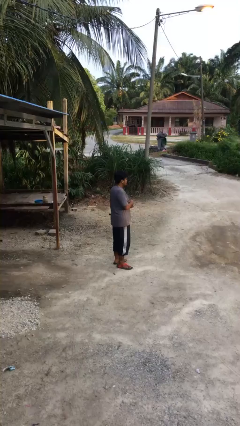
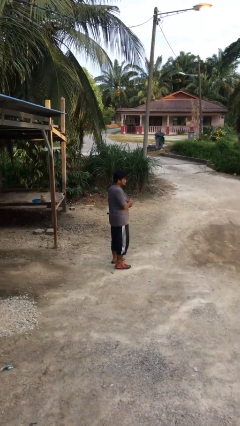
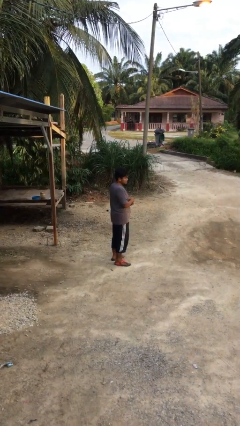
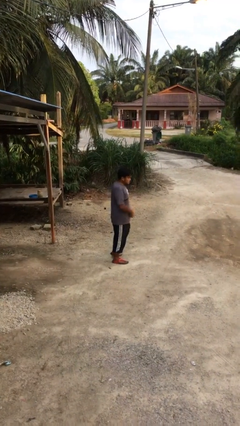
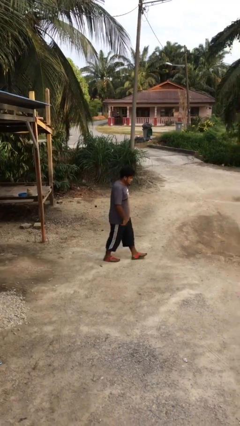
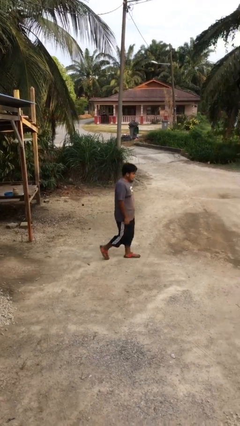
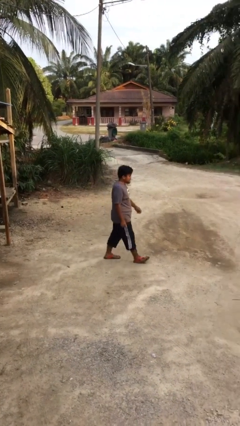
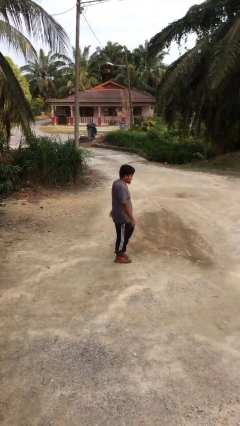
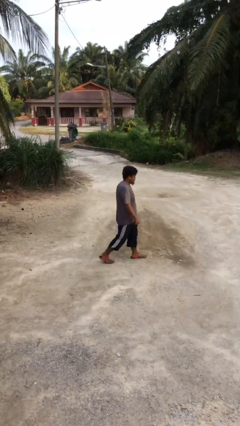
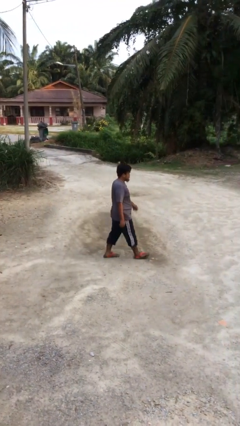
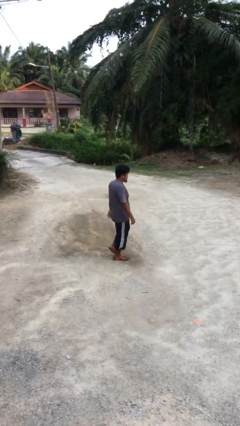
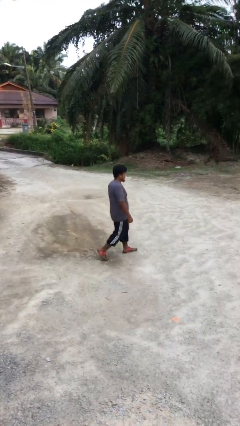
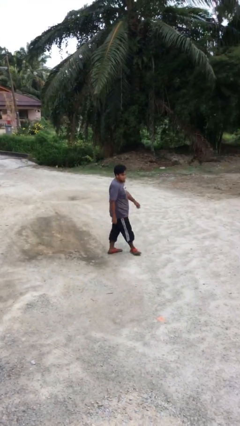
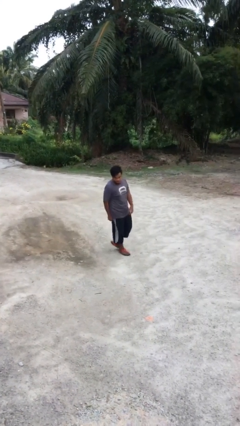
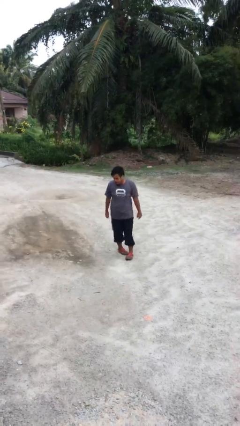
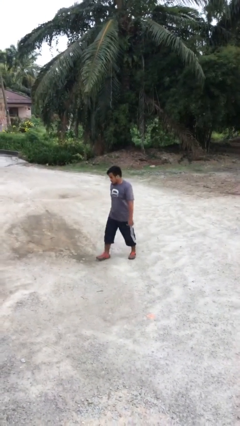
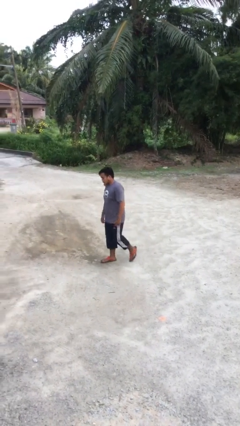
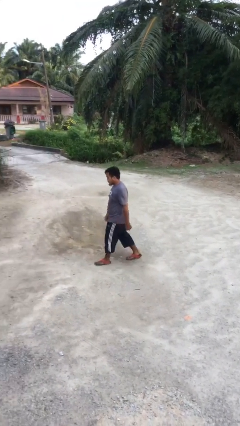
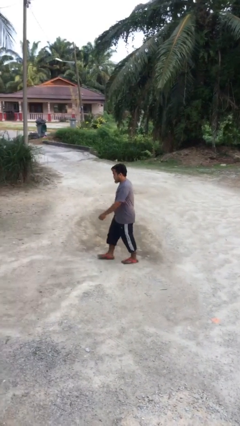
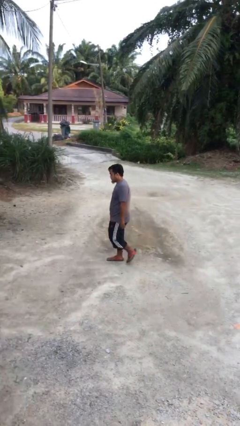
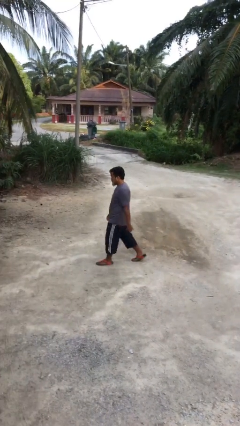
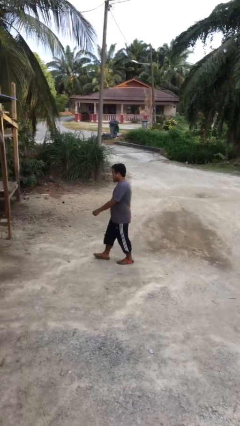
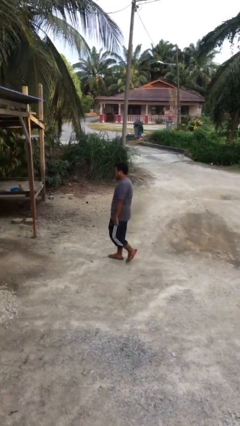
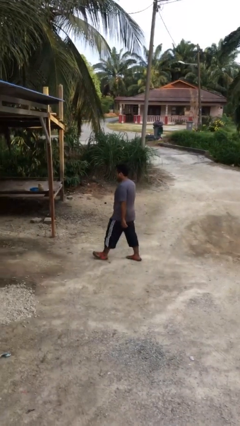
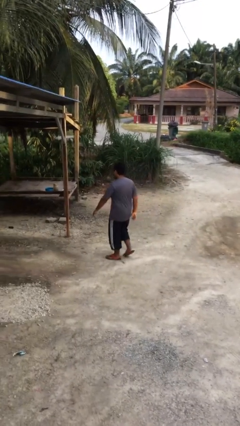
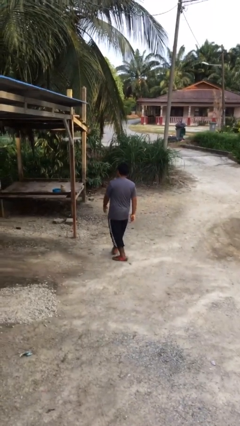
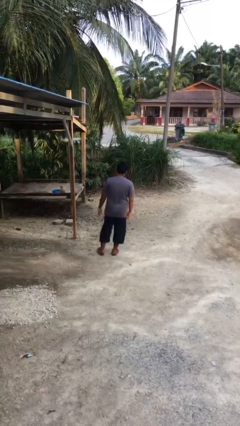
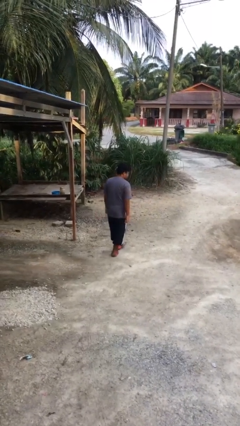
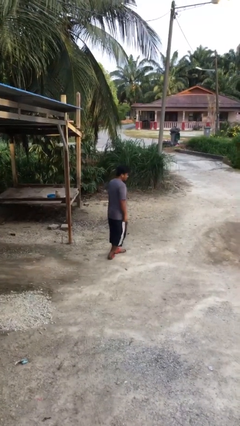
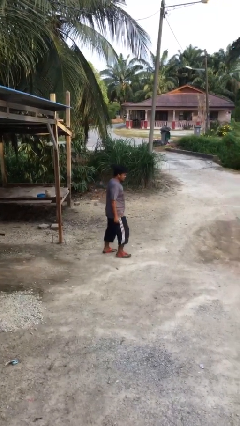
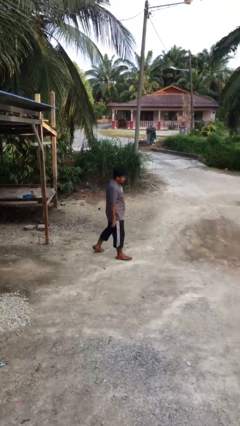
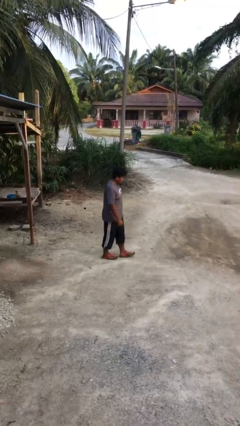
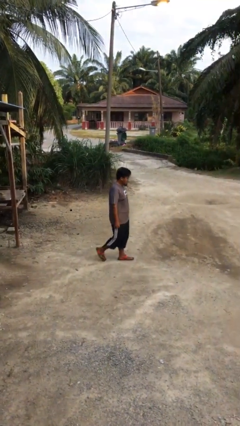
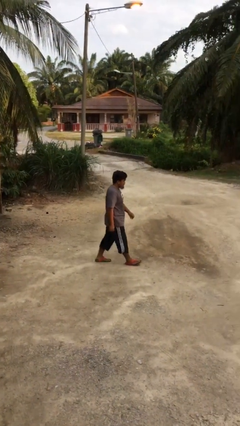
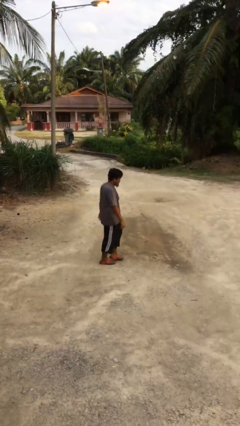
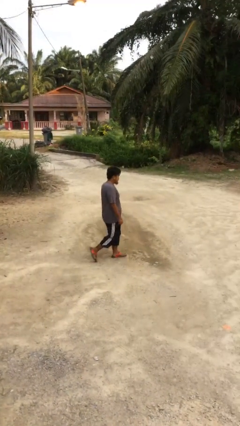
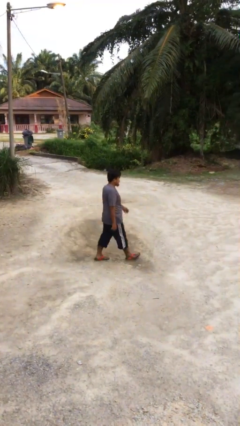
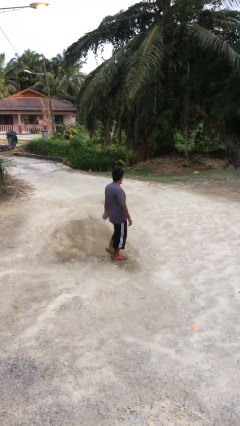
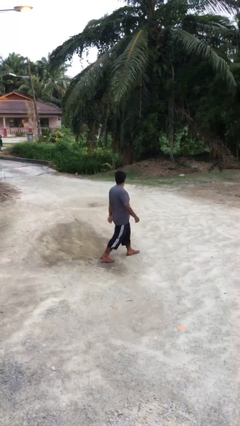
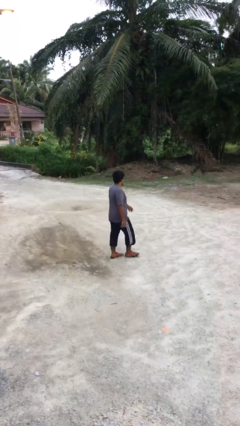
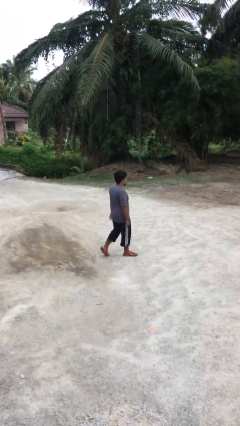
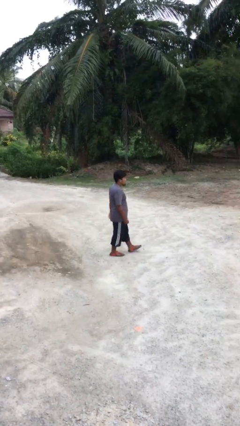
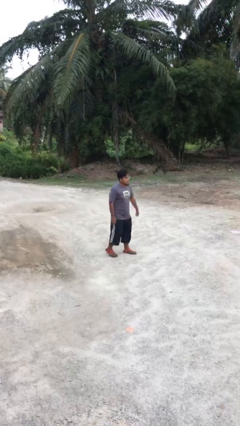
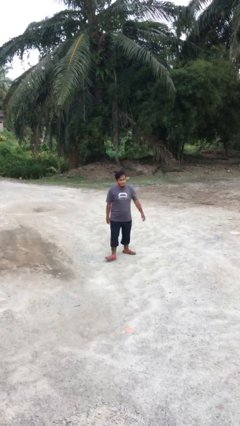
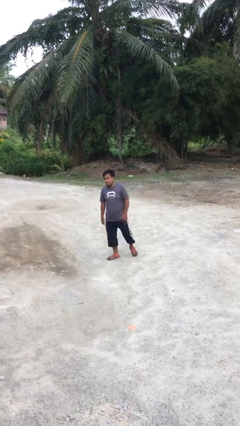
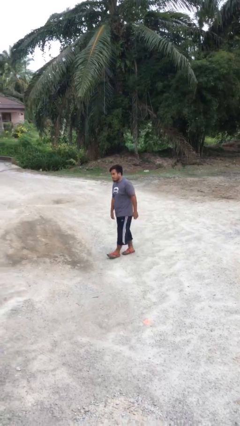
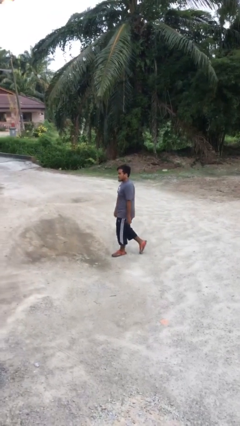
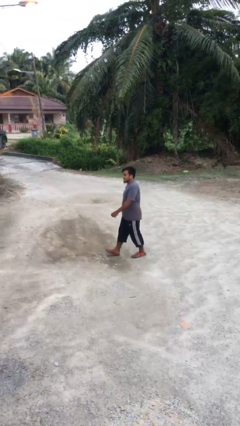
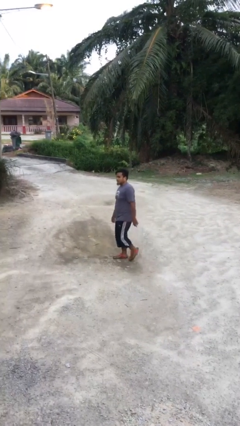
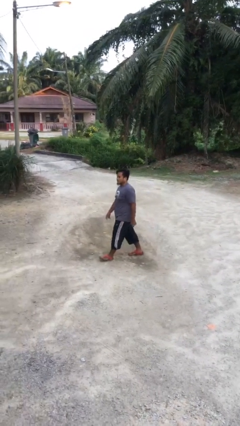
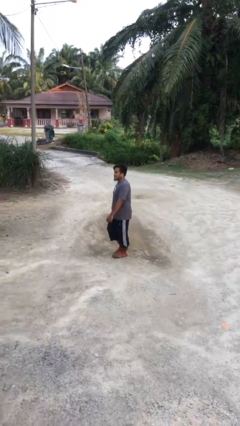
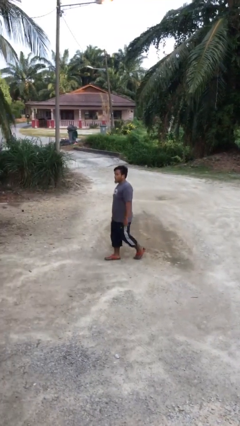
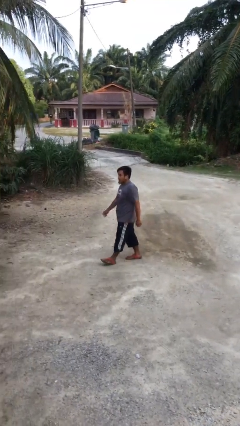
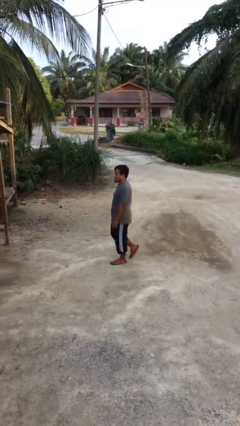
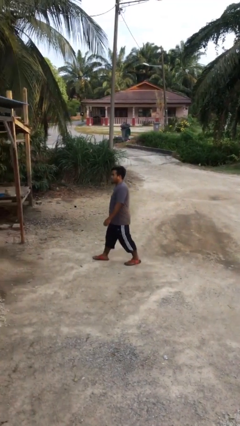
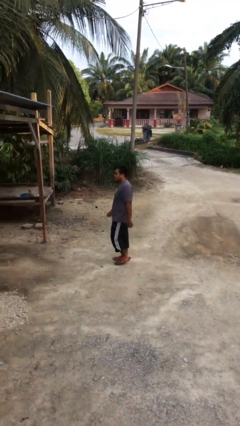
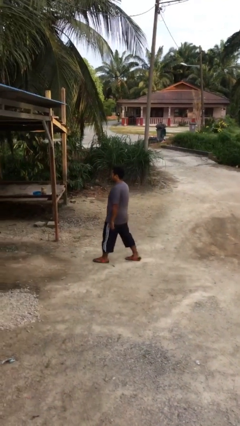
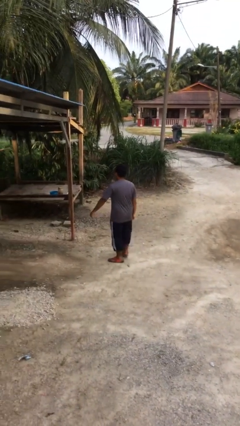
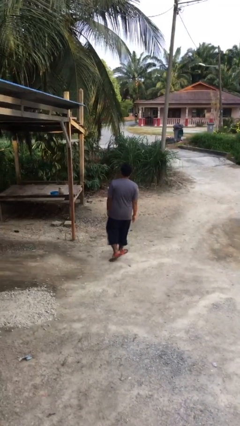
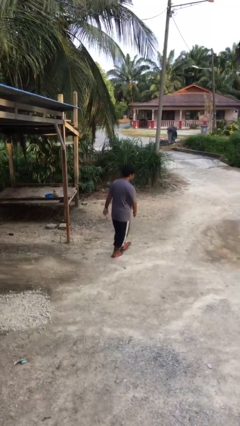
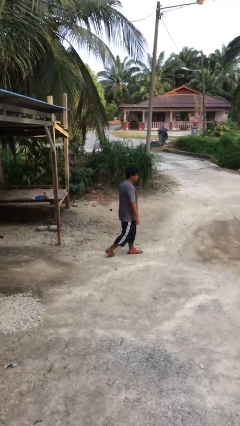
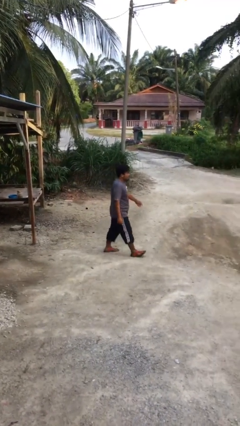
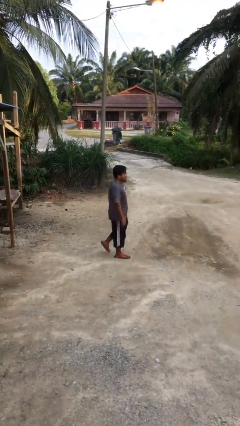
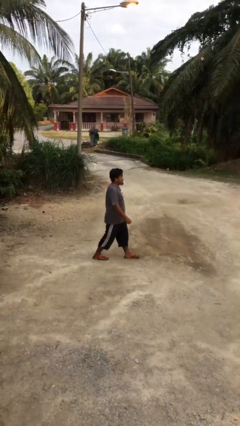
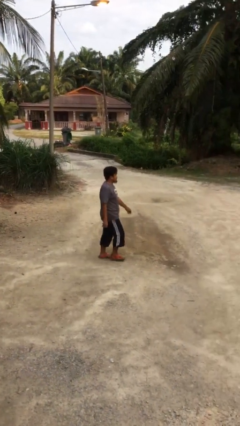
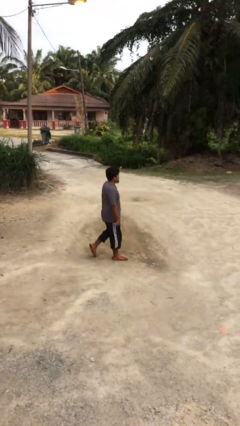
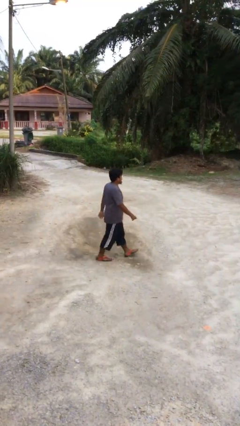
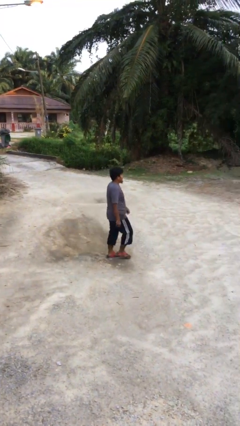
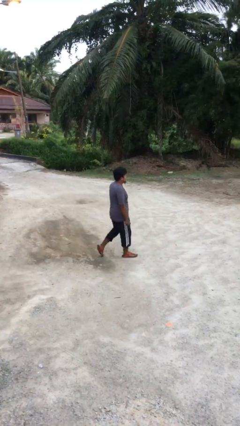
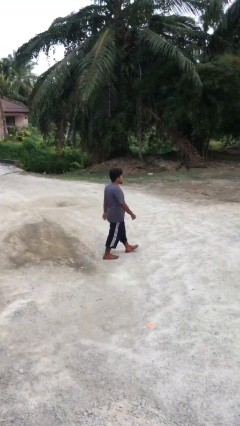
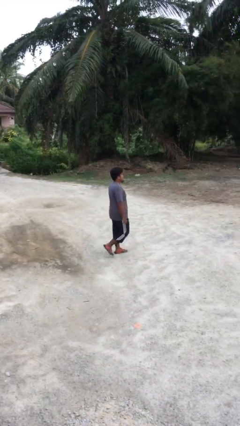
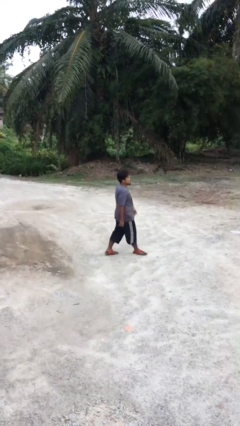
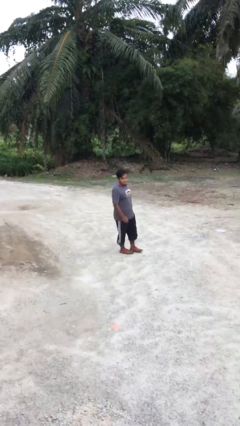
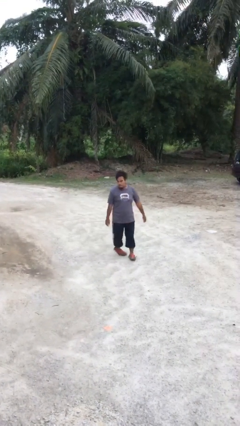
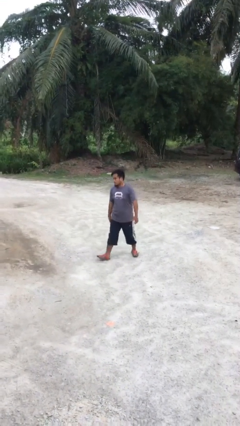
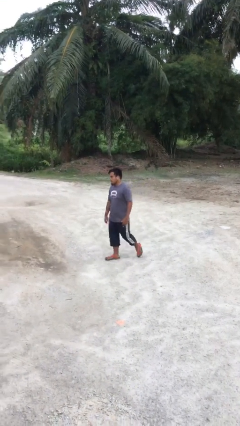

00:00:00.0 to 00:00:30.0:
person walks

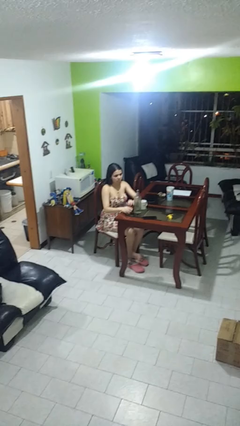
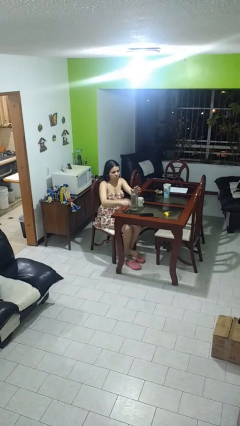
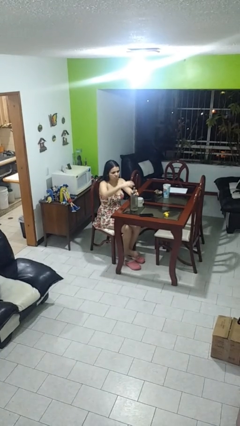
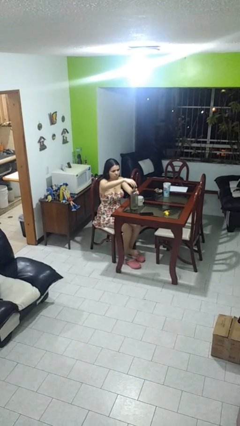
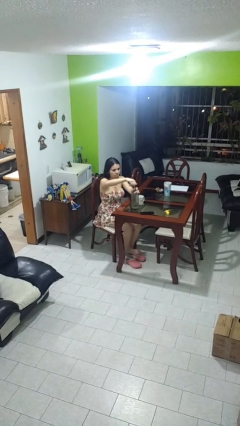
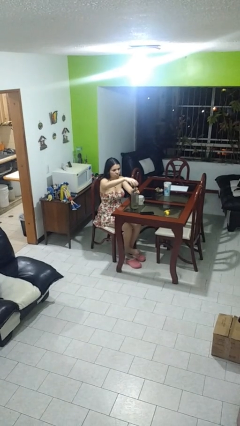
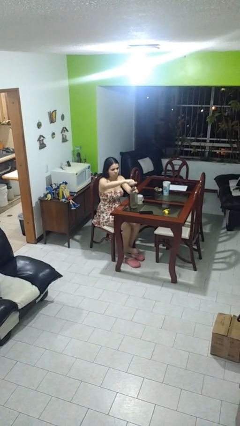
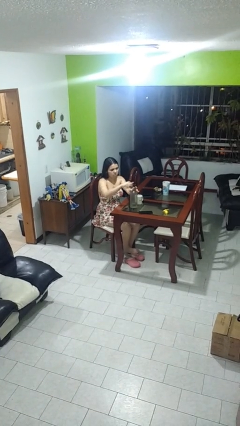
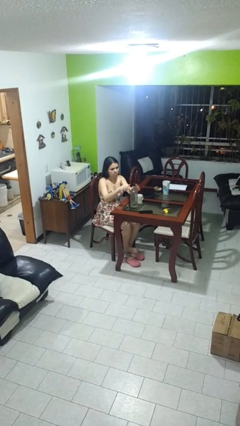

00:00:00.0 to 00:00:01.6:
person screws lid to bottle

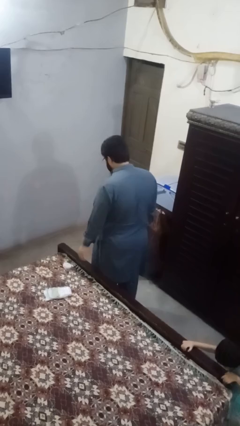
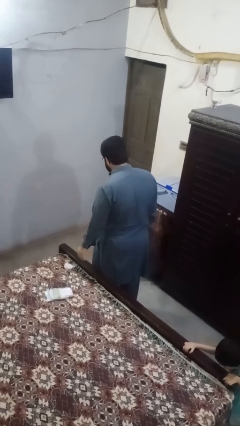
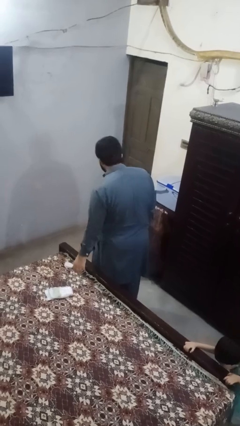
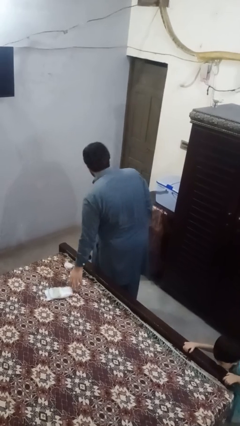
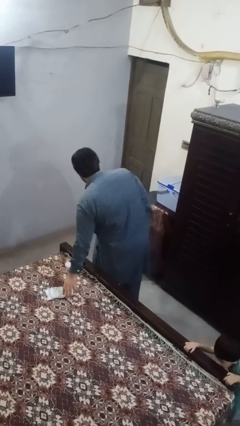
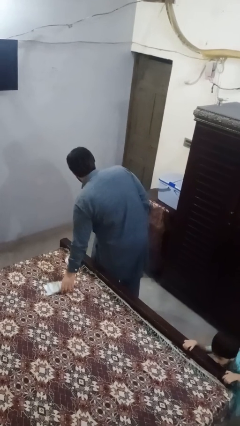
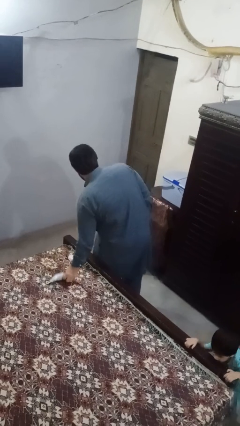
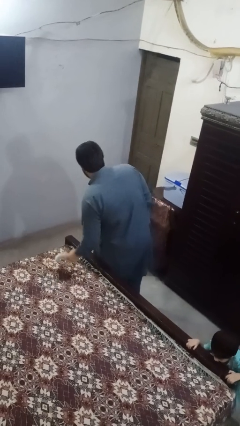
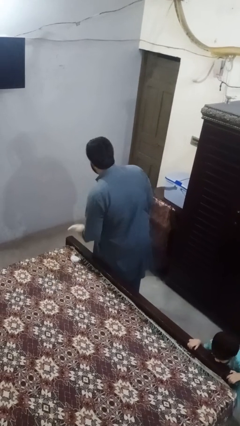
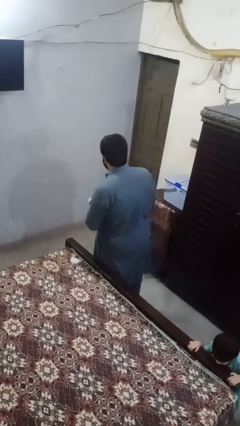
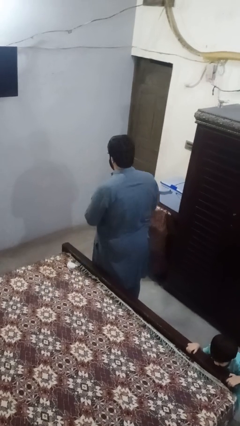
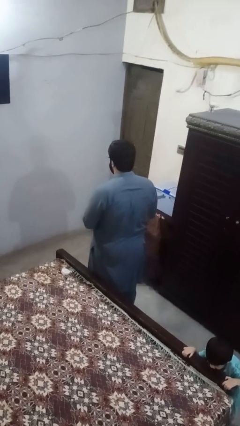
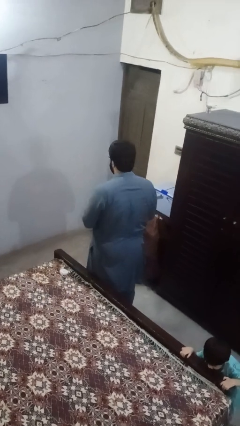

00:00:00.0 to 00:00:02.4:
person picks up object from bed
